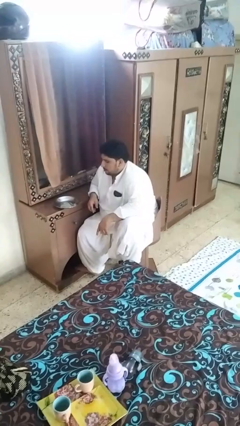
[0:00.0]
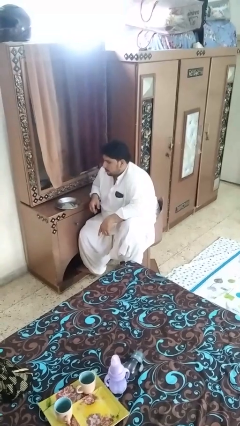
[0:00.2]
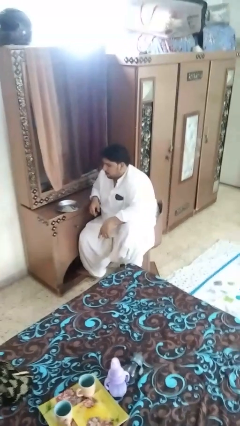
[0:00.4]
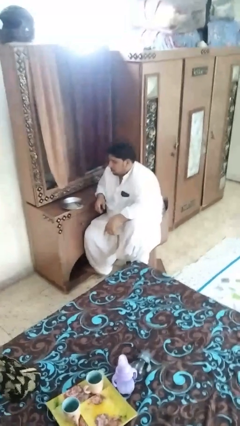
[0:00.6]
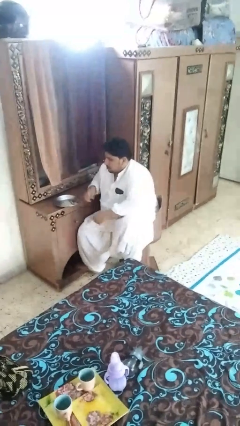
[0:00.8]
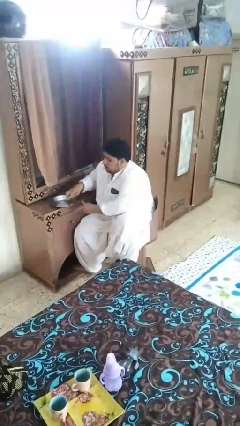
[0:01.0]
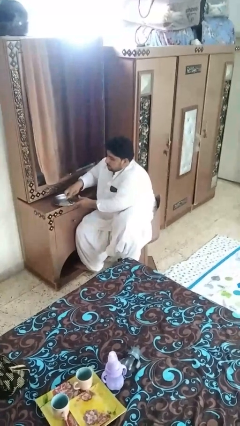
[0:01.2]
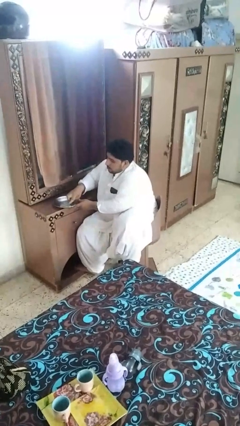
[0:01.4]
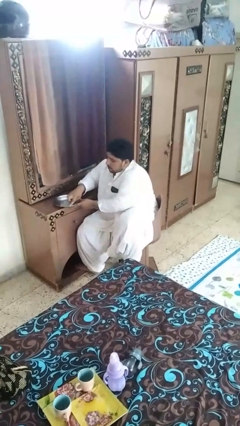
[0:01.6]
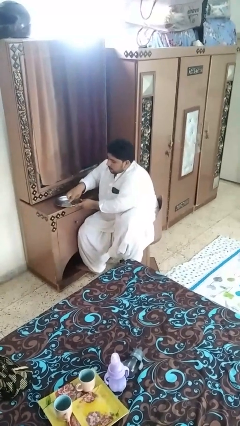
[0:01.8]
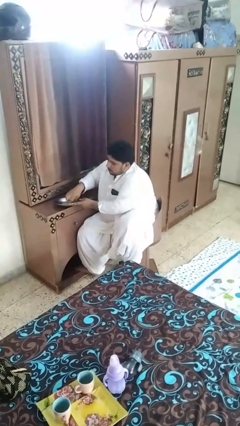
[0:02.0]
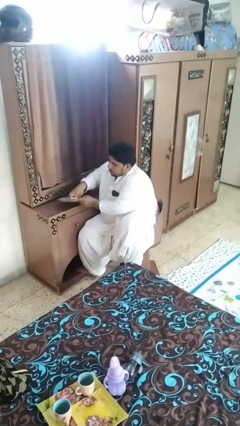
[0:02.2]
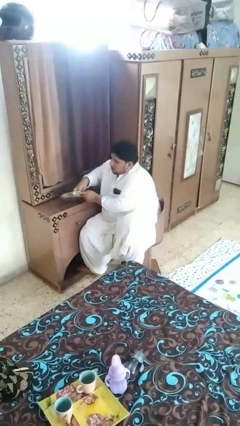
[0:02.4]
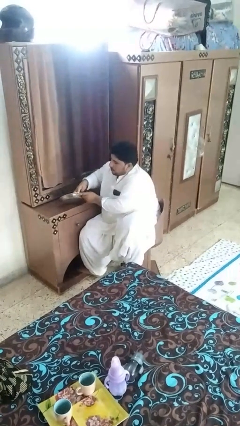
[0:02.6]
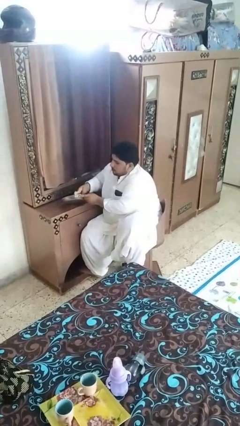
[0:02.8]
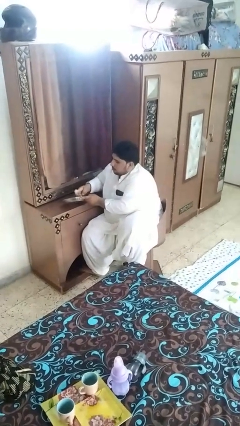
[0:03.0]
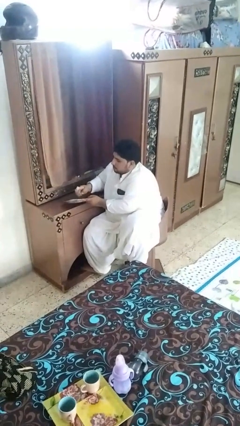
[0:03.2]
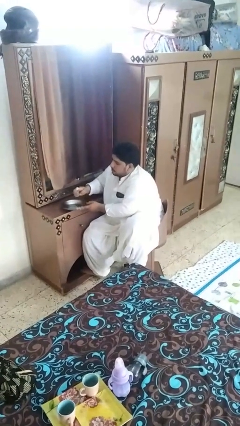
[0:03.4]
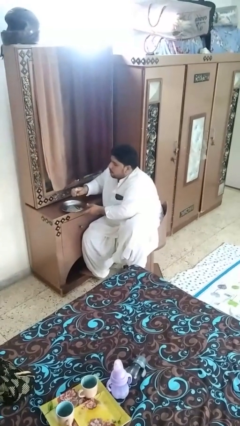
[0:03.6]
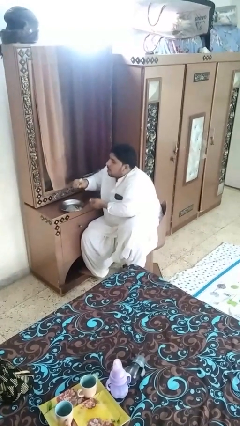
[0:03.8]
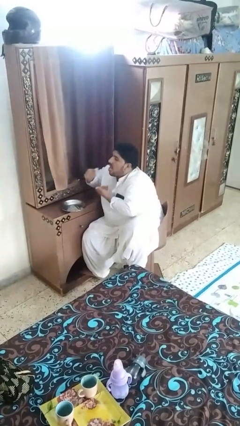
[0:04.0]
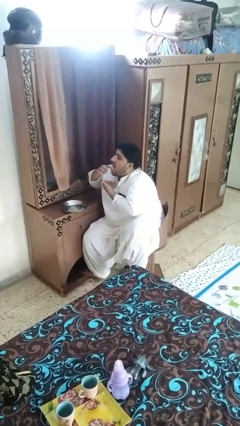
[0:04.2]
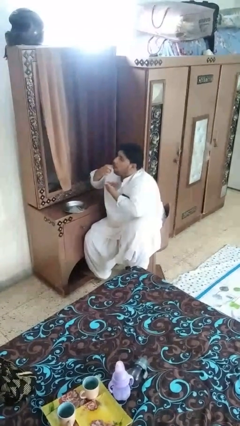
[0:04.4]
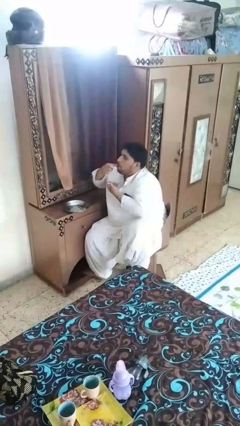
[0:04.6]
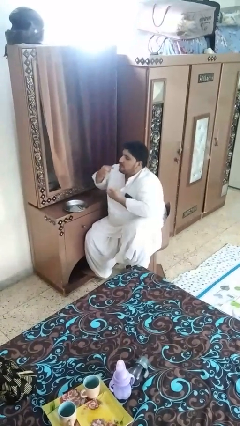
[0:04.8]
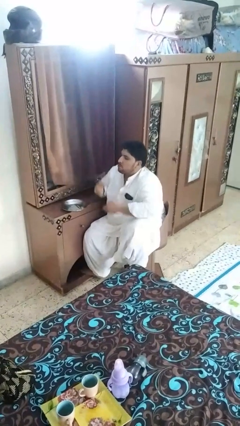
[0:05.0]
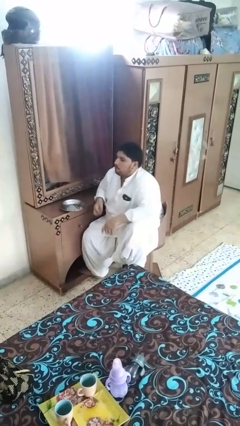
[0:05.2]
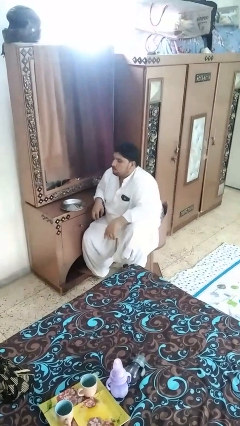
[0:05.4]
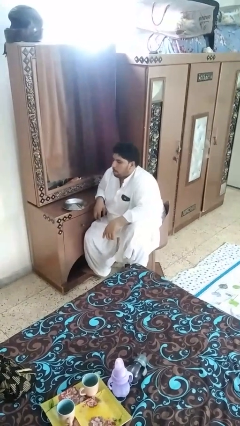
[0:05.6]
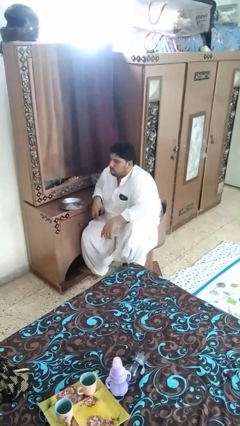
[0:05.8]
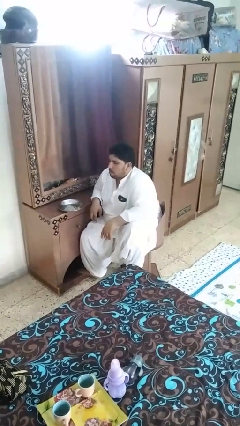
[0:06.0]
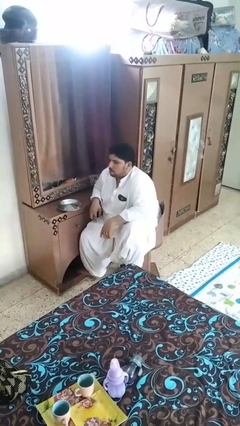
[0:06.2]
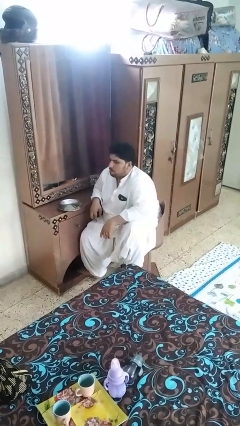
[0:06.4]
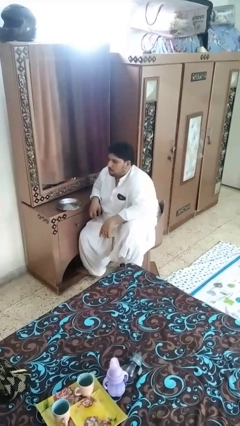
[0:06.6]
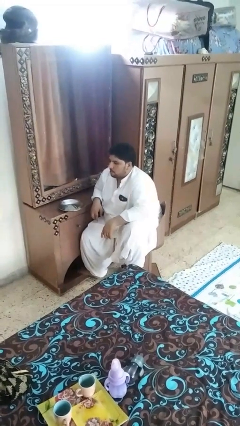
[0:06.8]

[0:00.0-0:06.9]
person eats with hands

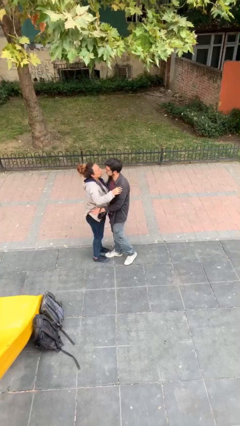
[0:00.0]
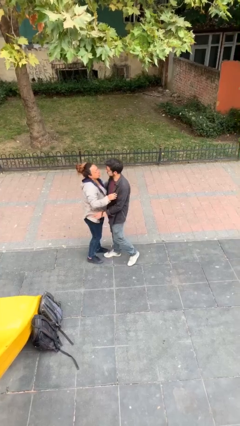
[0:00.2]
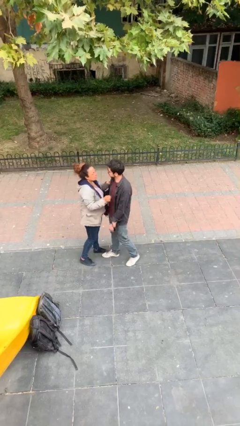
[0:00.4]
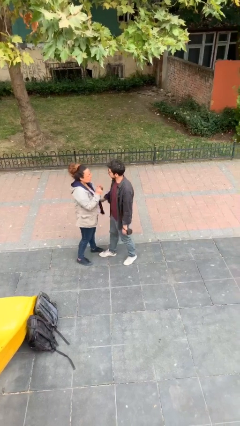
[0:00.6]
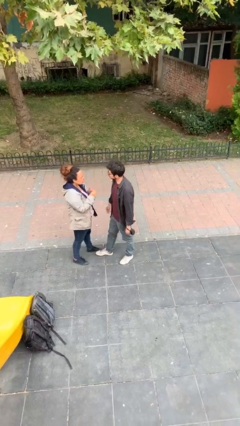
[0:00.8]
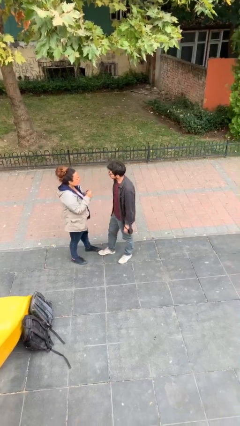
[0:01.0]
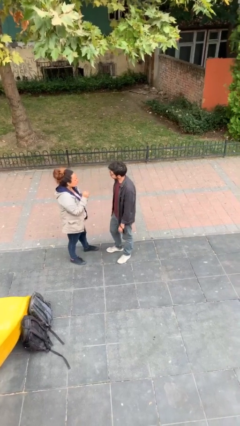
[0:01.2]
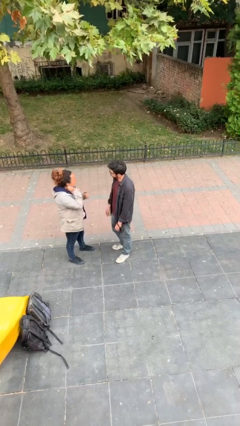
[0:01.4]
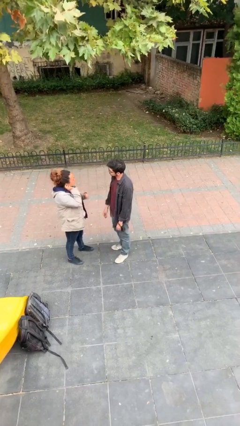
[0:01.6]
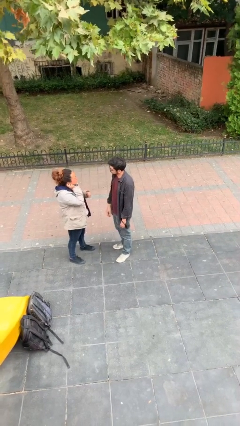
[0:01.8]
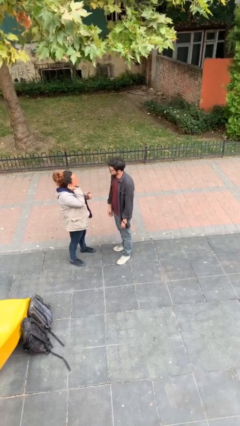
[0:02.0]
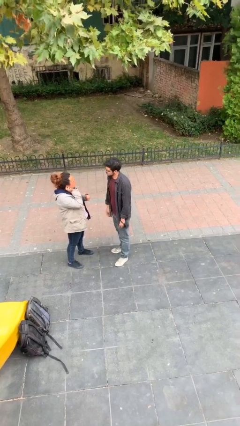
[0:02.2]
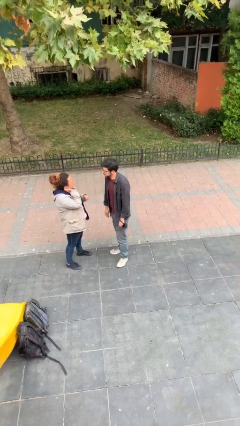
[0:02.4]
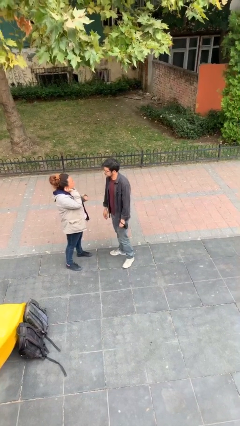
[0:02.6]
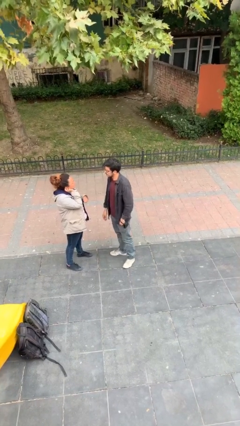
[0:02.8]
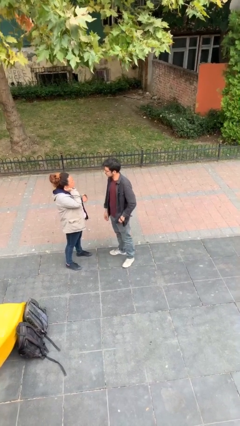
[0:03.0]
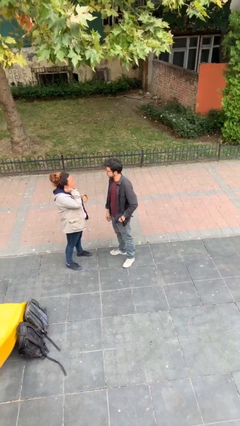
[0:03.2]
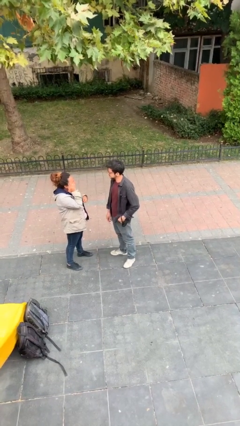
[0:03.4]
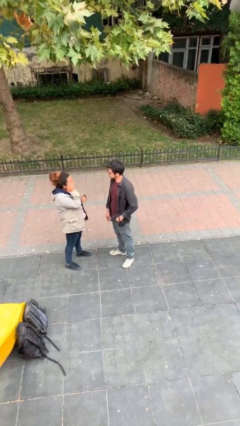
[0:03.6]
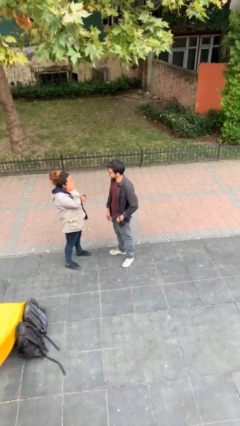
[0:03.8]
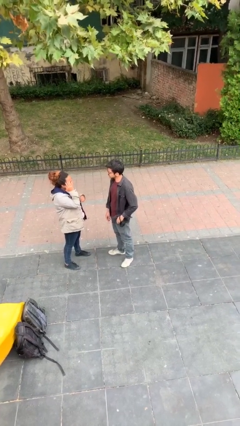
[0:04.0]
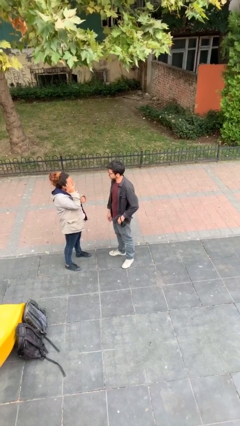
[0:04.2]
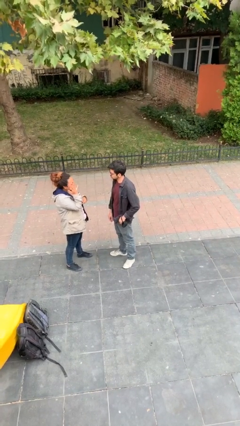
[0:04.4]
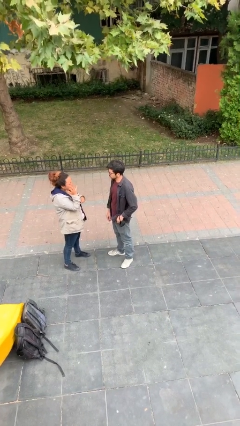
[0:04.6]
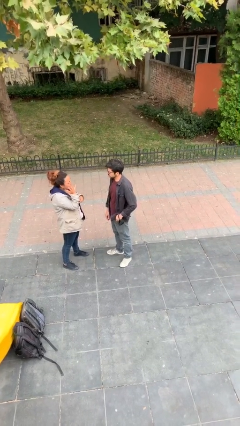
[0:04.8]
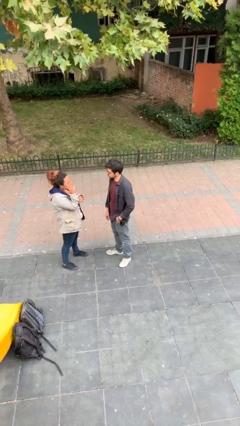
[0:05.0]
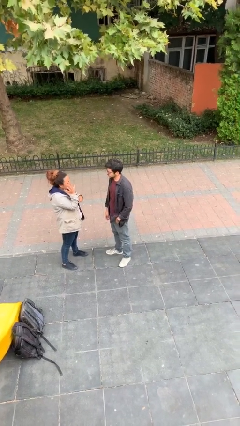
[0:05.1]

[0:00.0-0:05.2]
person talks to person

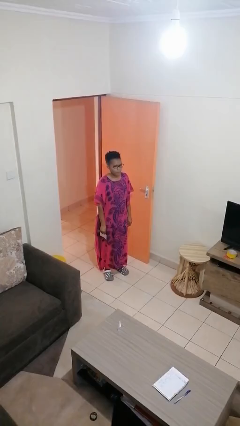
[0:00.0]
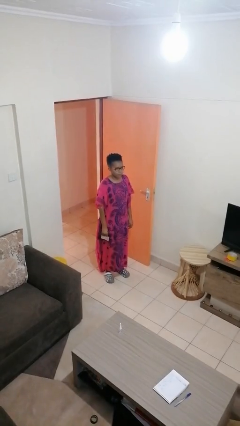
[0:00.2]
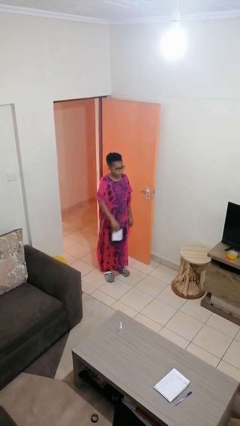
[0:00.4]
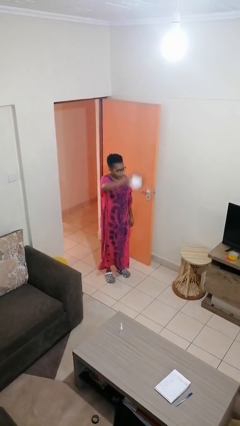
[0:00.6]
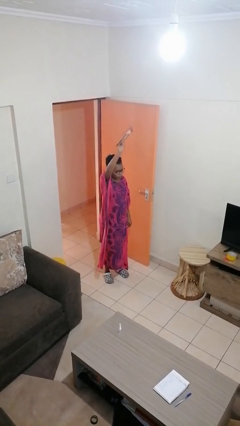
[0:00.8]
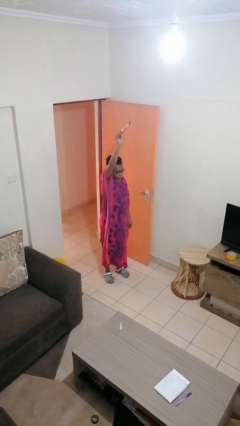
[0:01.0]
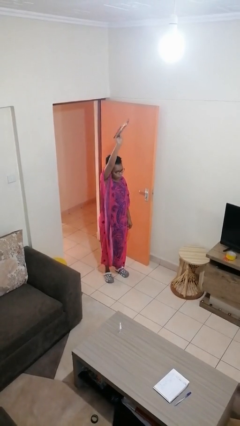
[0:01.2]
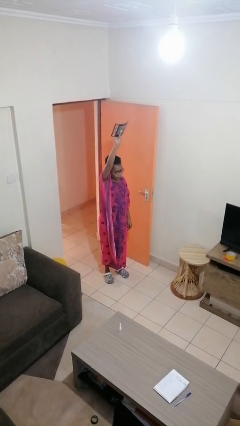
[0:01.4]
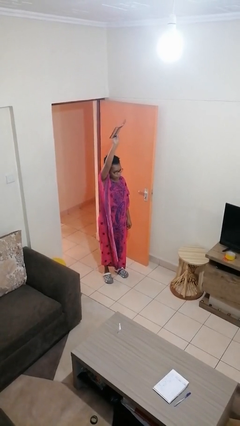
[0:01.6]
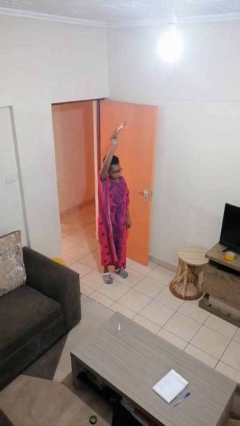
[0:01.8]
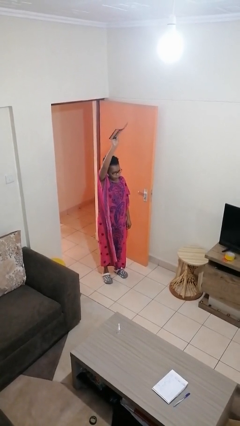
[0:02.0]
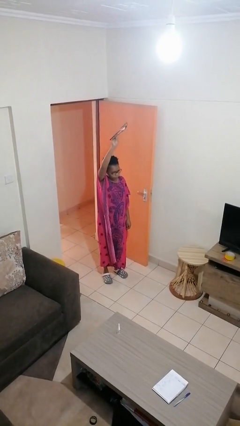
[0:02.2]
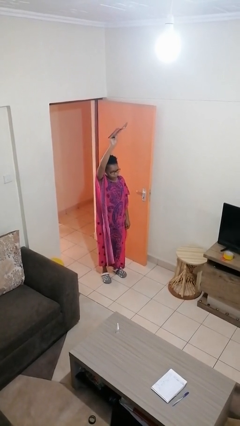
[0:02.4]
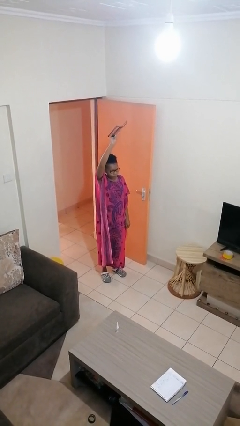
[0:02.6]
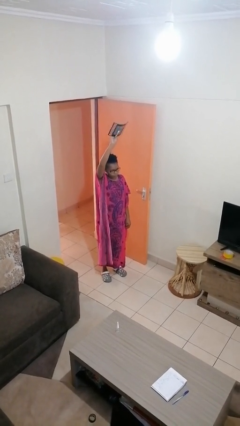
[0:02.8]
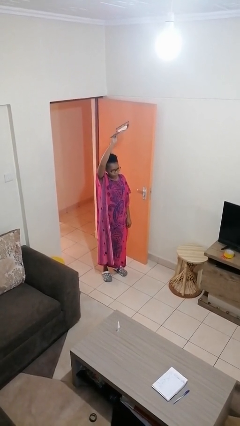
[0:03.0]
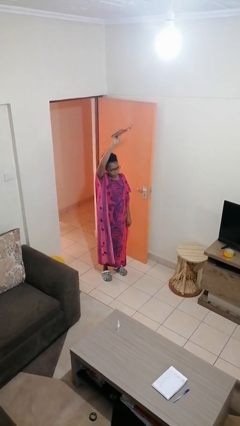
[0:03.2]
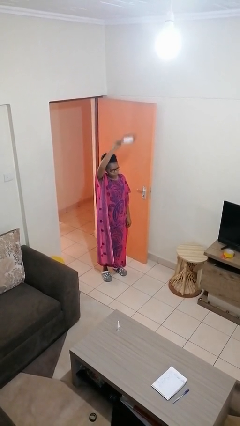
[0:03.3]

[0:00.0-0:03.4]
person holds object above head

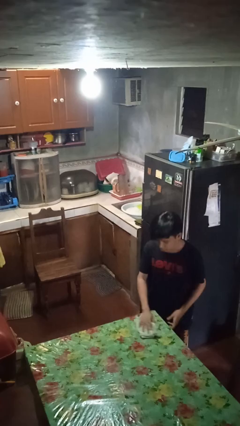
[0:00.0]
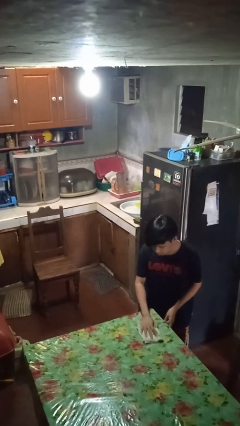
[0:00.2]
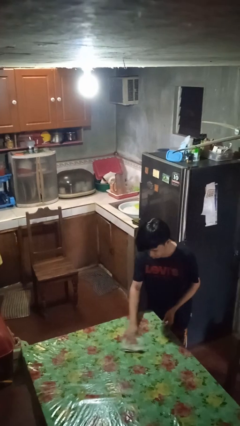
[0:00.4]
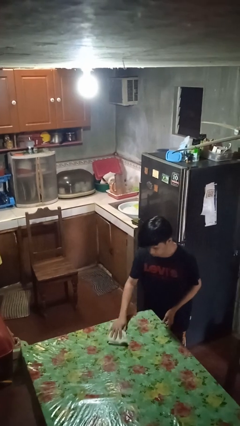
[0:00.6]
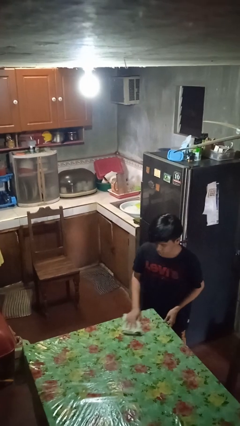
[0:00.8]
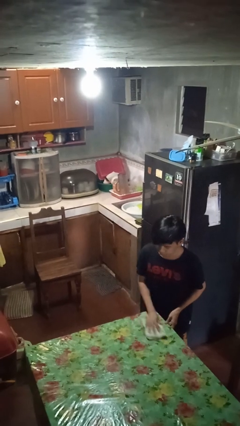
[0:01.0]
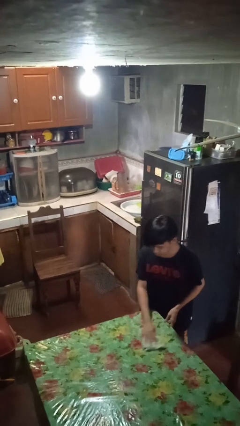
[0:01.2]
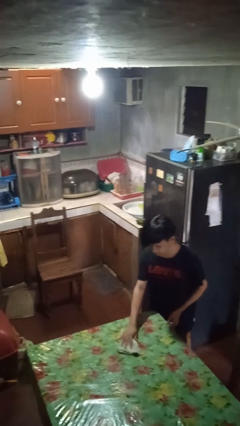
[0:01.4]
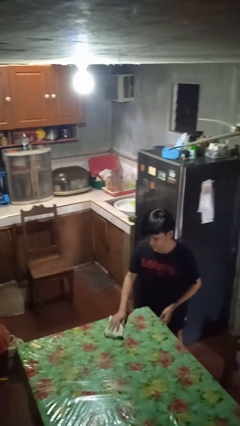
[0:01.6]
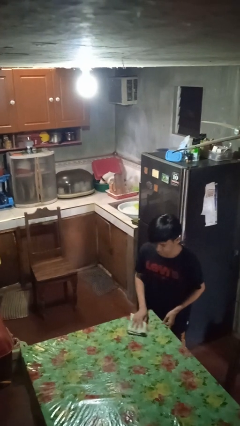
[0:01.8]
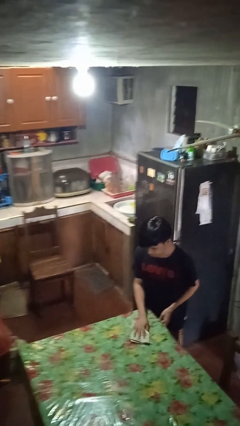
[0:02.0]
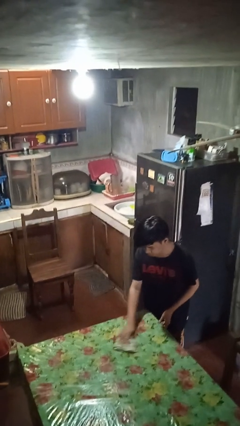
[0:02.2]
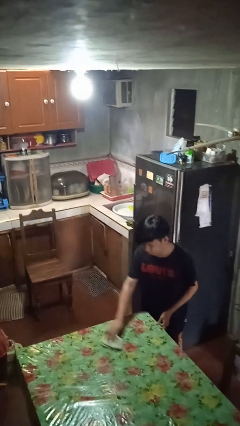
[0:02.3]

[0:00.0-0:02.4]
person cleans table with rag
